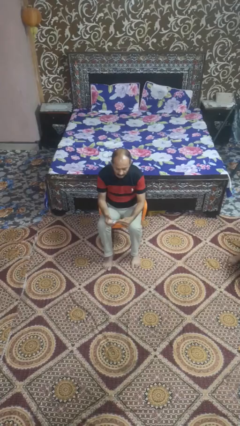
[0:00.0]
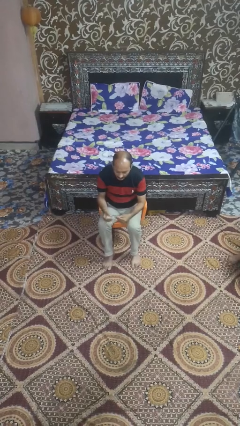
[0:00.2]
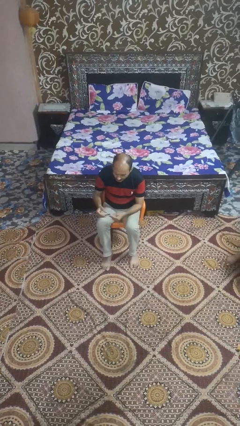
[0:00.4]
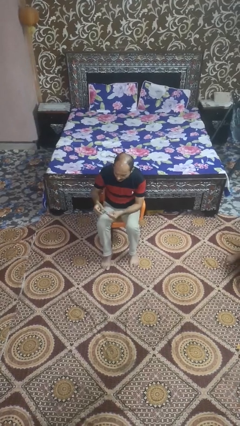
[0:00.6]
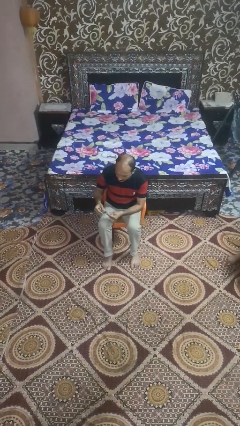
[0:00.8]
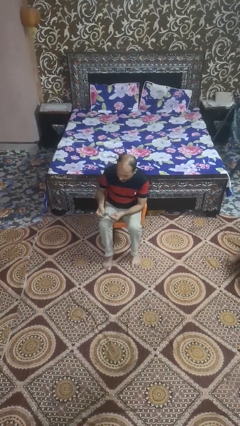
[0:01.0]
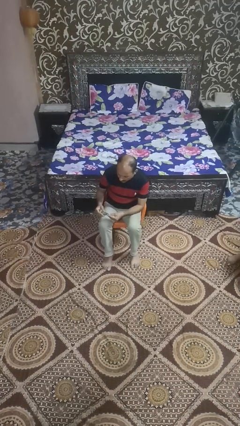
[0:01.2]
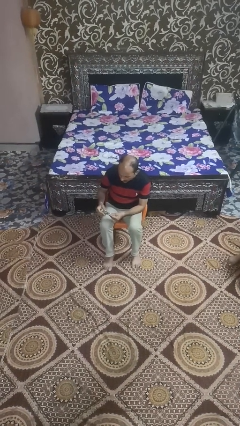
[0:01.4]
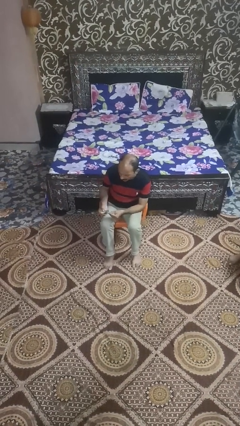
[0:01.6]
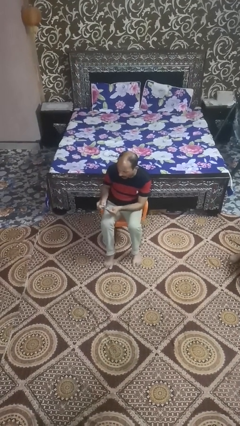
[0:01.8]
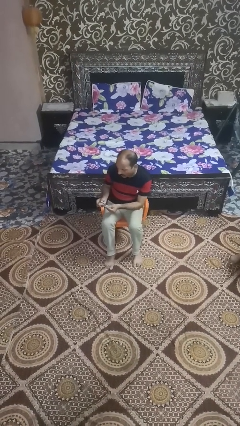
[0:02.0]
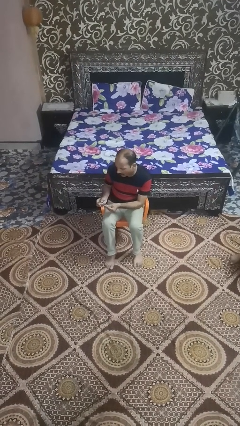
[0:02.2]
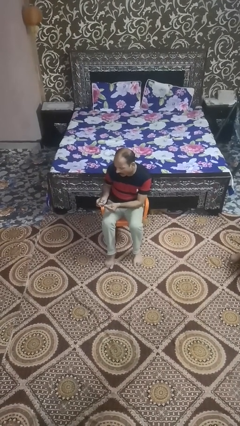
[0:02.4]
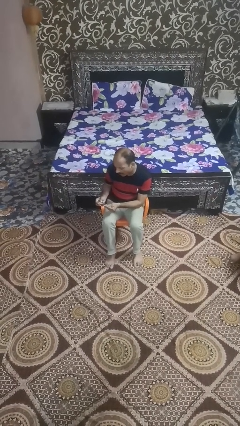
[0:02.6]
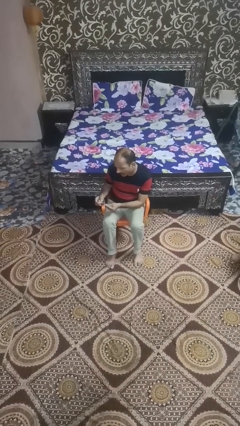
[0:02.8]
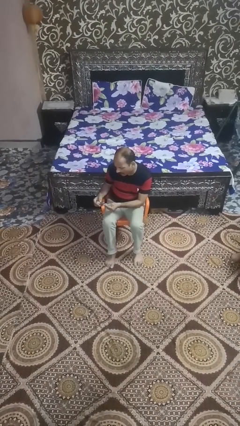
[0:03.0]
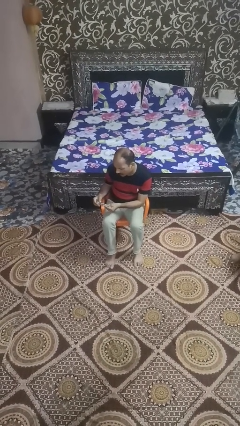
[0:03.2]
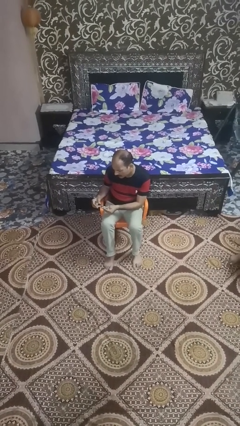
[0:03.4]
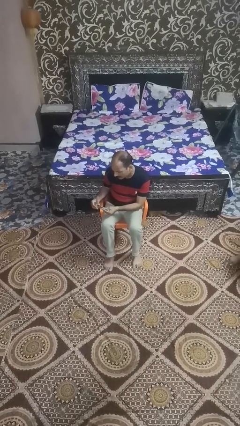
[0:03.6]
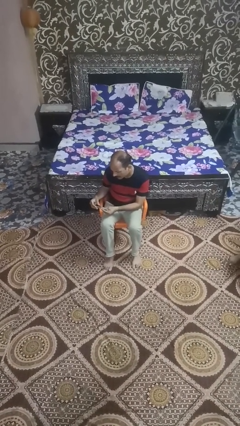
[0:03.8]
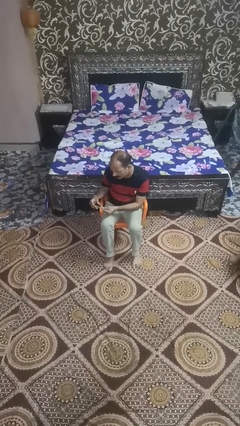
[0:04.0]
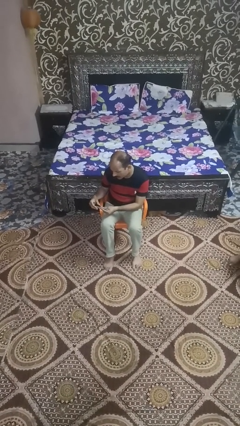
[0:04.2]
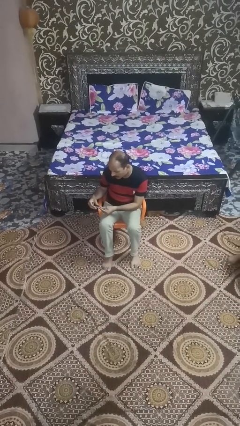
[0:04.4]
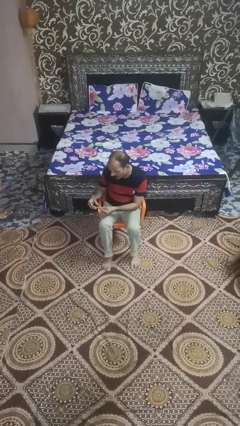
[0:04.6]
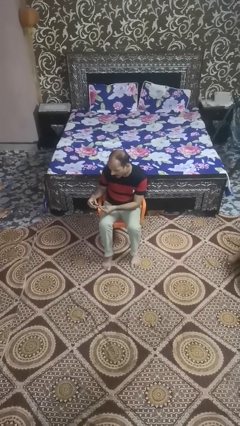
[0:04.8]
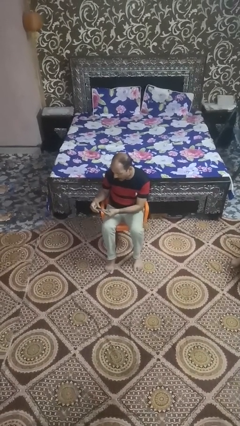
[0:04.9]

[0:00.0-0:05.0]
person clips fingernails

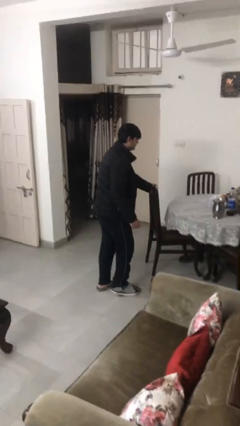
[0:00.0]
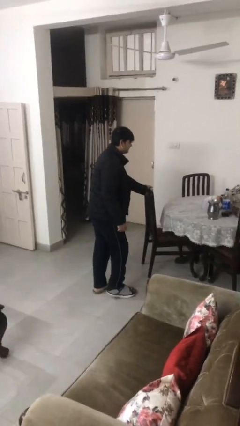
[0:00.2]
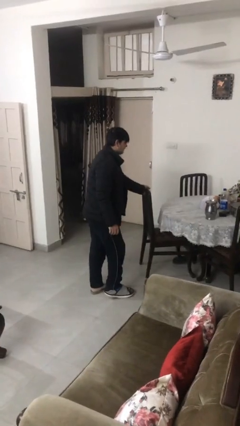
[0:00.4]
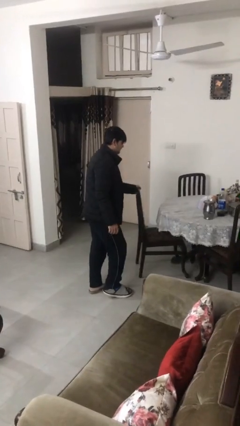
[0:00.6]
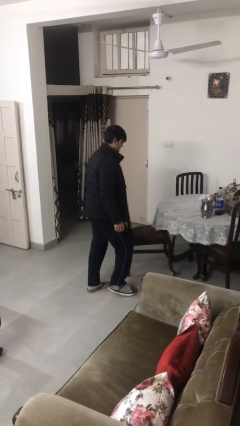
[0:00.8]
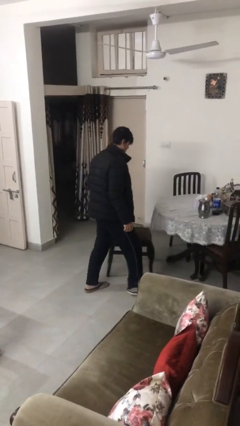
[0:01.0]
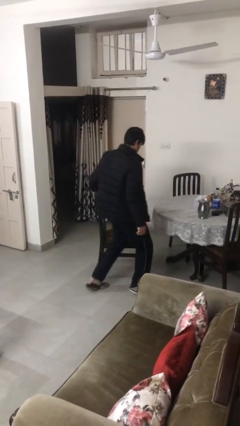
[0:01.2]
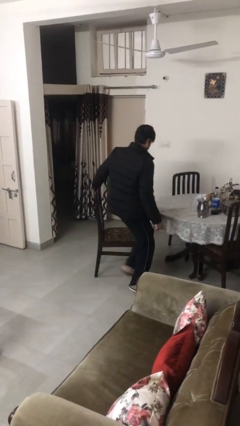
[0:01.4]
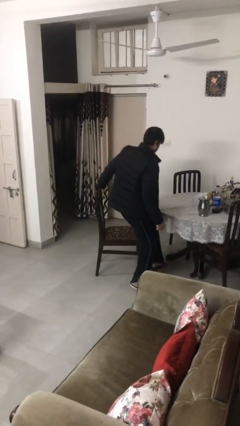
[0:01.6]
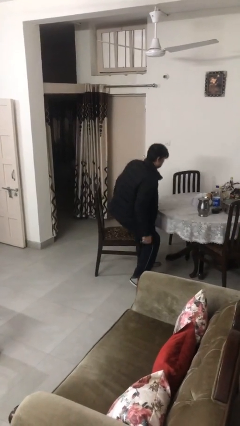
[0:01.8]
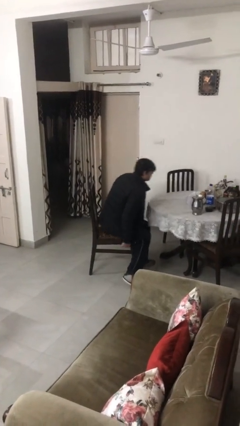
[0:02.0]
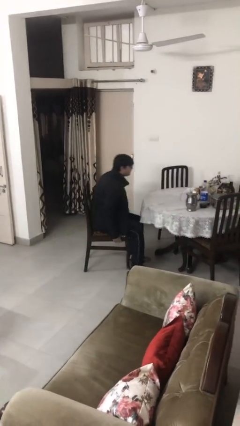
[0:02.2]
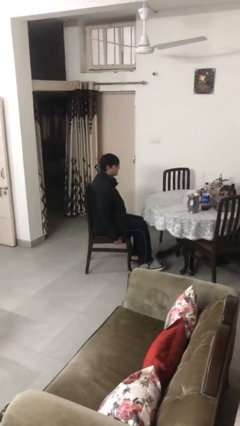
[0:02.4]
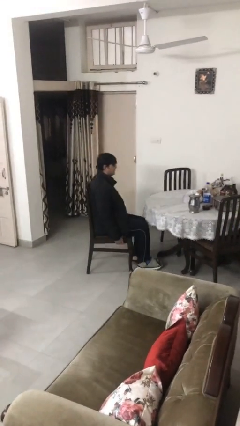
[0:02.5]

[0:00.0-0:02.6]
person sits down

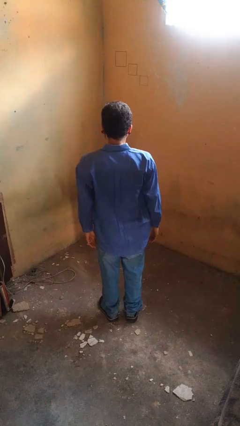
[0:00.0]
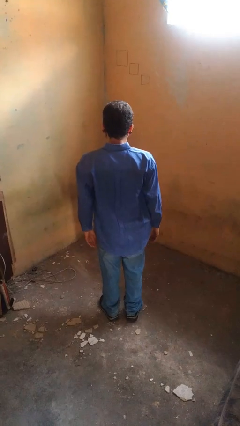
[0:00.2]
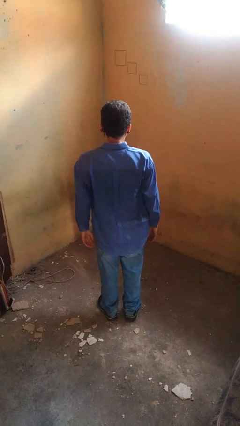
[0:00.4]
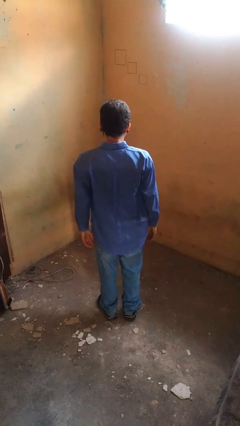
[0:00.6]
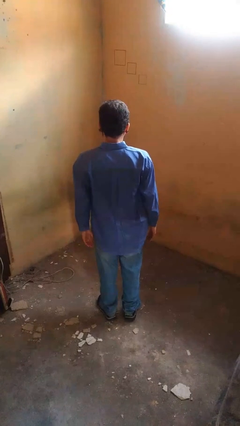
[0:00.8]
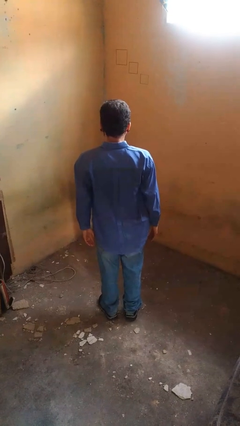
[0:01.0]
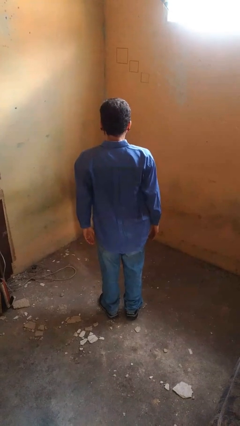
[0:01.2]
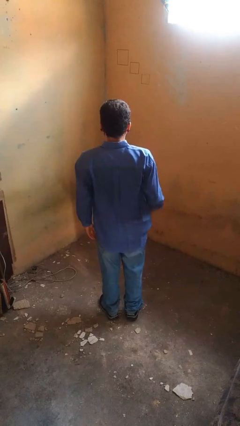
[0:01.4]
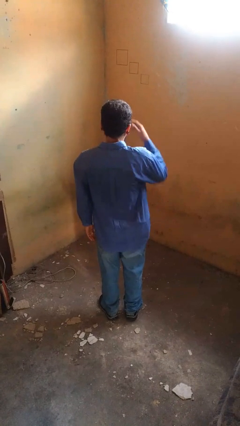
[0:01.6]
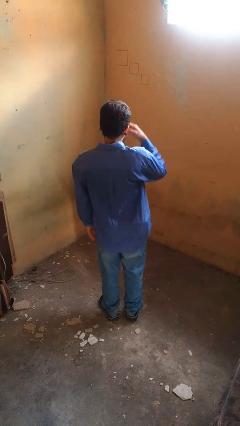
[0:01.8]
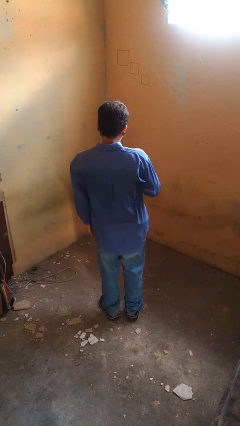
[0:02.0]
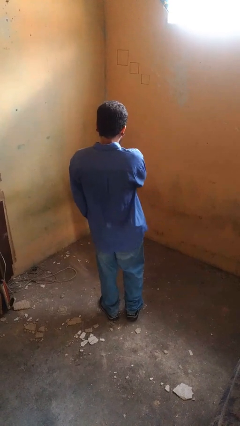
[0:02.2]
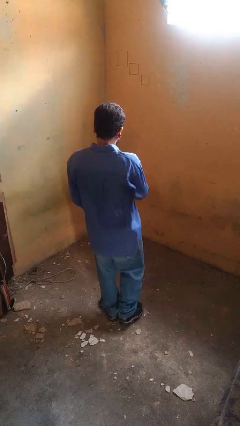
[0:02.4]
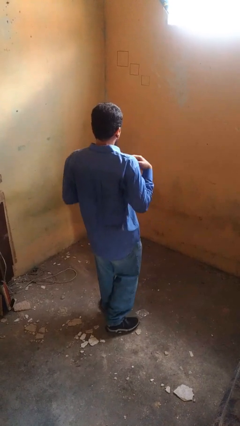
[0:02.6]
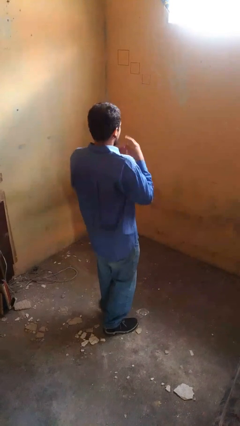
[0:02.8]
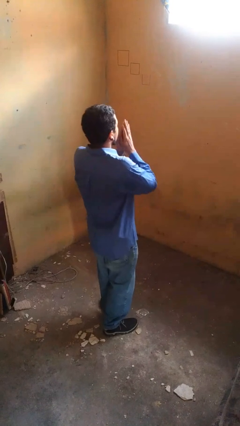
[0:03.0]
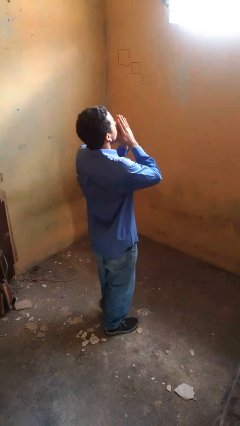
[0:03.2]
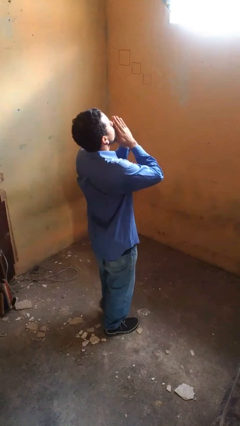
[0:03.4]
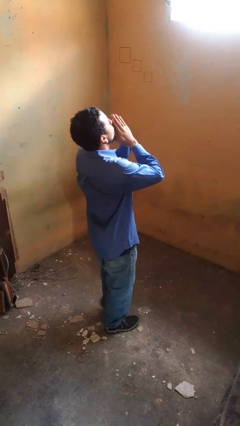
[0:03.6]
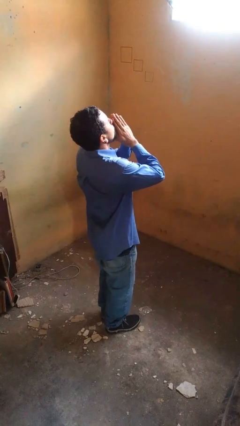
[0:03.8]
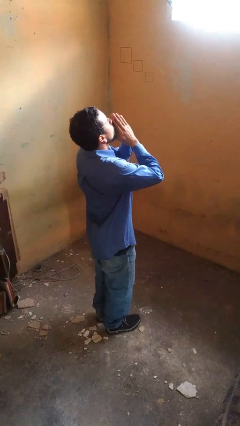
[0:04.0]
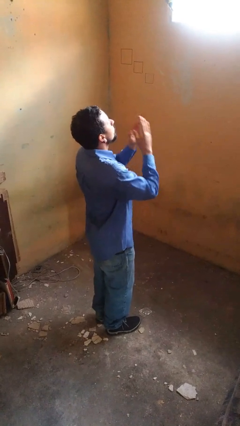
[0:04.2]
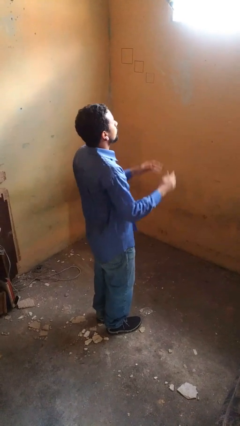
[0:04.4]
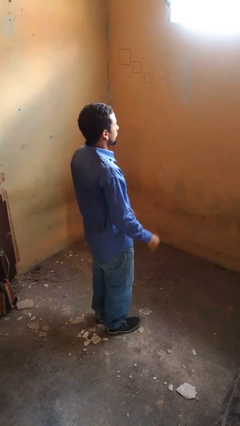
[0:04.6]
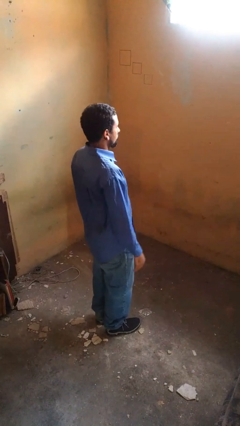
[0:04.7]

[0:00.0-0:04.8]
person prays

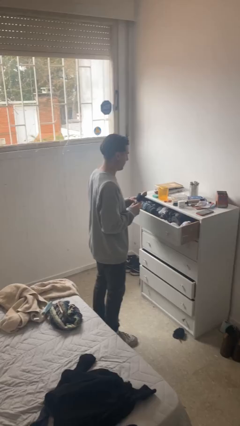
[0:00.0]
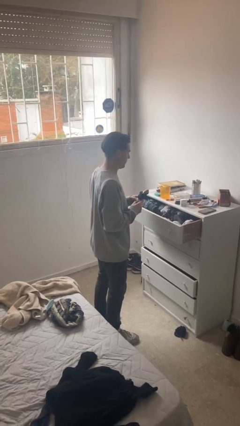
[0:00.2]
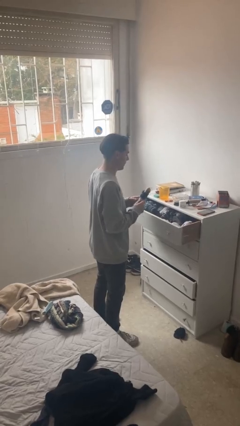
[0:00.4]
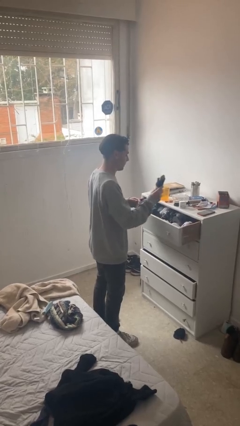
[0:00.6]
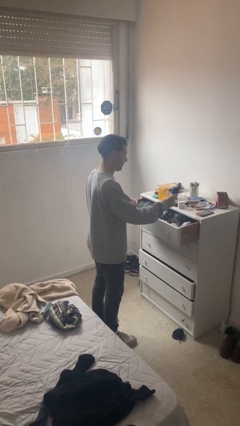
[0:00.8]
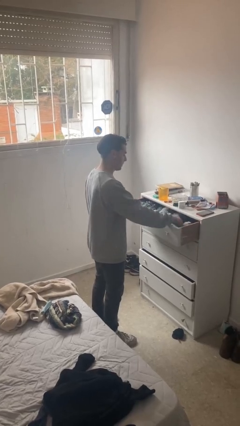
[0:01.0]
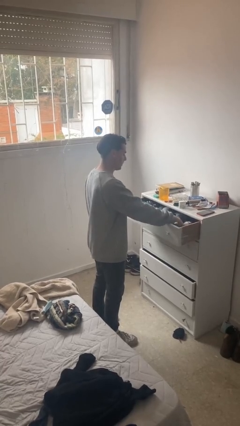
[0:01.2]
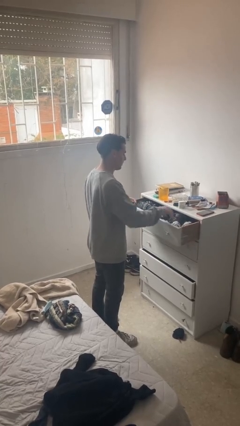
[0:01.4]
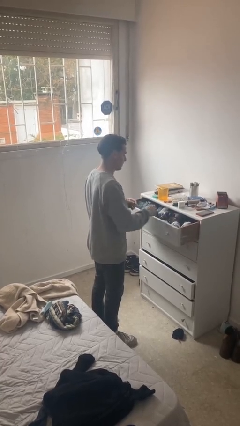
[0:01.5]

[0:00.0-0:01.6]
person puts clothes into dresser

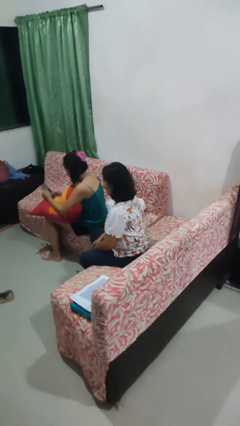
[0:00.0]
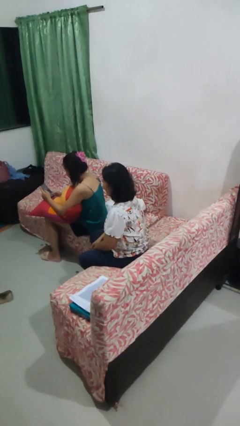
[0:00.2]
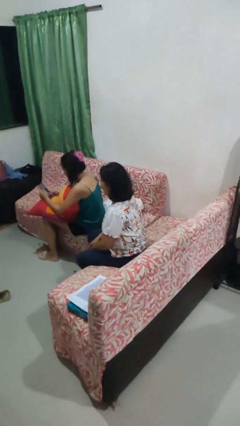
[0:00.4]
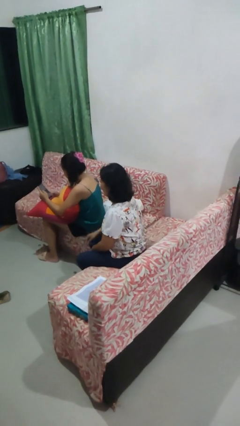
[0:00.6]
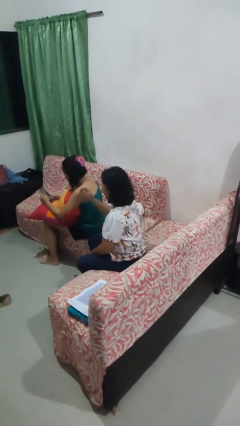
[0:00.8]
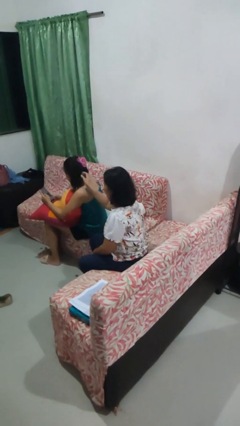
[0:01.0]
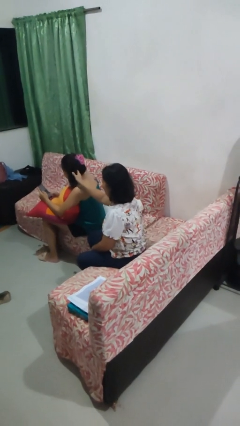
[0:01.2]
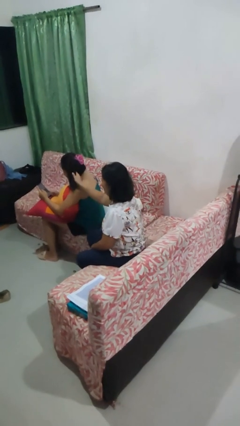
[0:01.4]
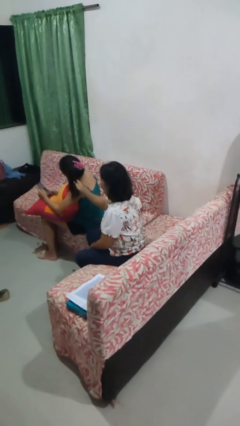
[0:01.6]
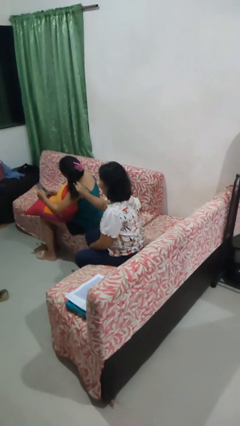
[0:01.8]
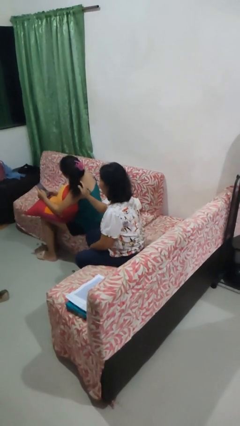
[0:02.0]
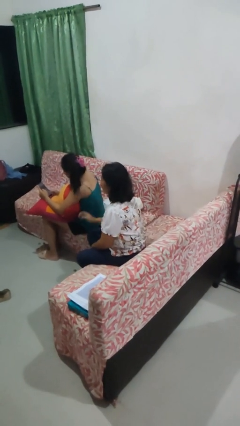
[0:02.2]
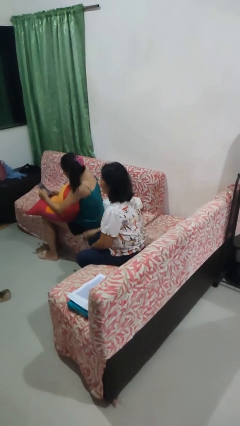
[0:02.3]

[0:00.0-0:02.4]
person grabs person by hair

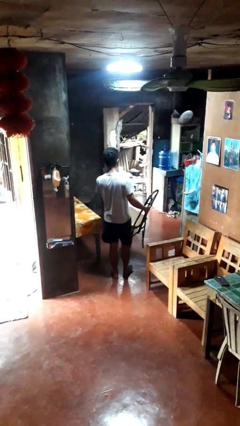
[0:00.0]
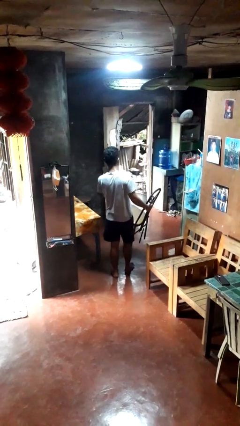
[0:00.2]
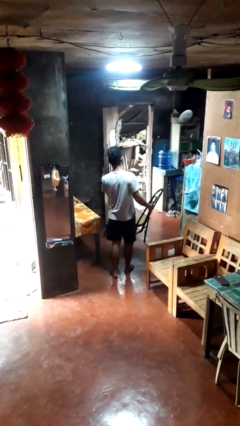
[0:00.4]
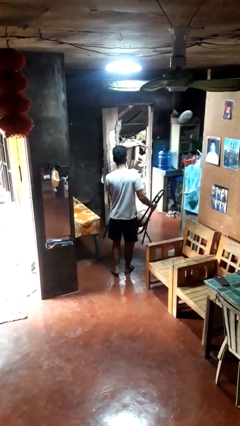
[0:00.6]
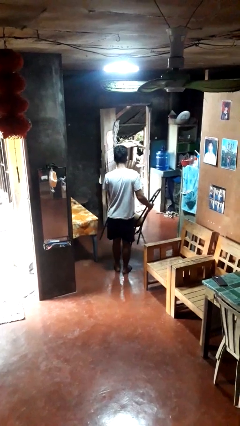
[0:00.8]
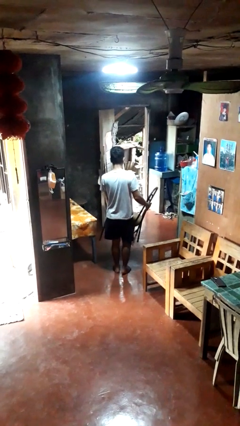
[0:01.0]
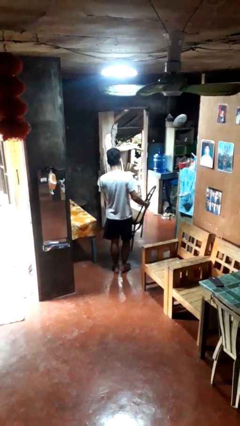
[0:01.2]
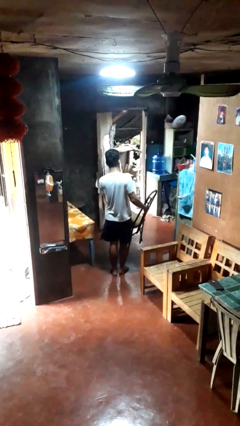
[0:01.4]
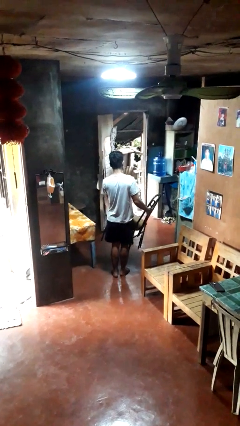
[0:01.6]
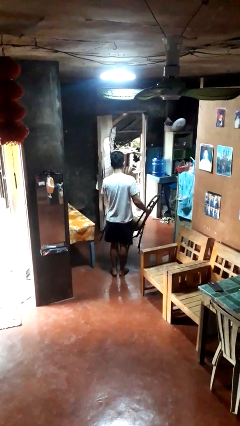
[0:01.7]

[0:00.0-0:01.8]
person carries furniture
